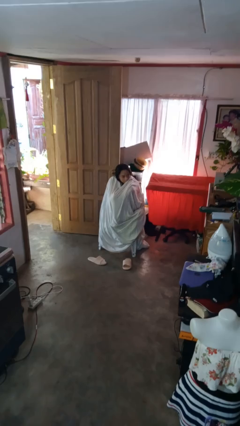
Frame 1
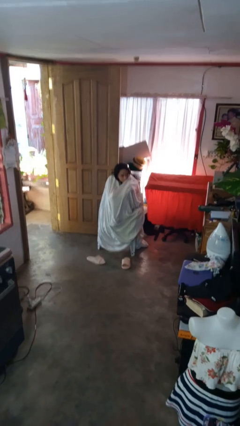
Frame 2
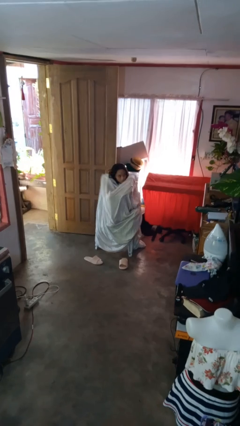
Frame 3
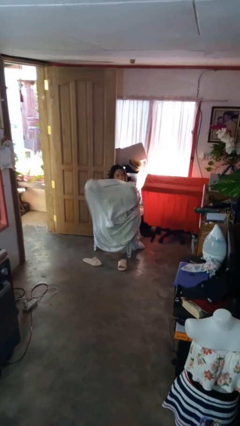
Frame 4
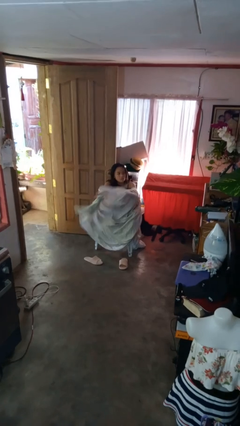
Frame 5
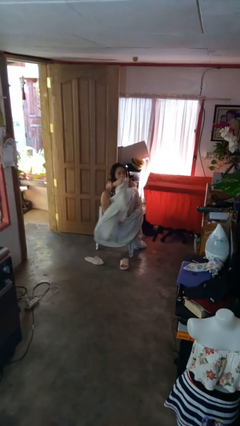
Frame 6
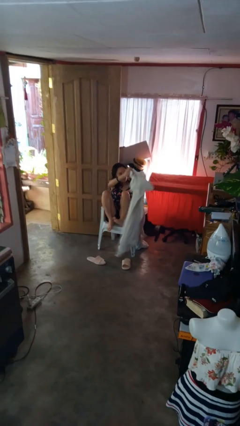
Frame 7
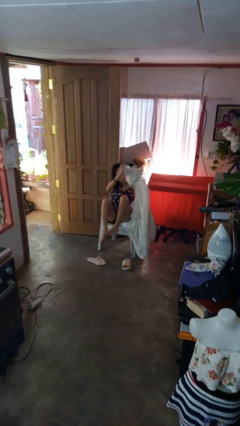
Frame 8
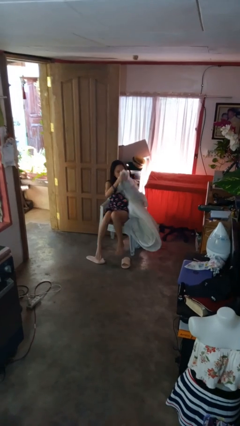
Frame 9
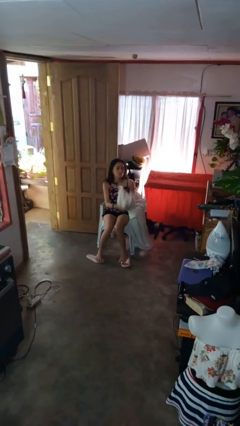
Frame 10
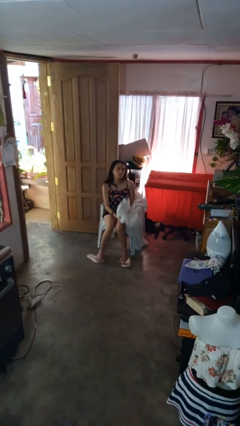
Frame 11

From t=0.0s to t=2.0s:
person uncovers with blanket

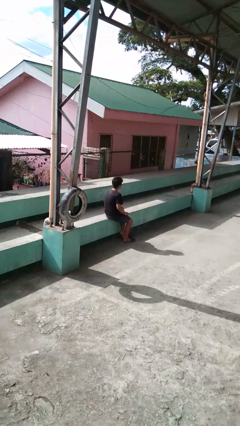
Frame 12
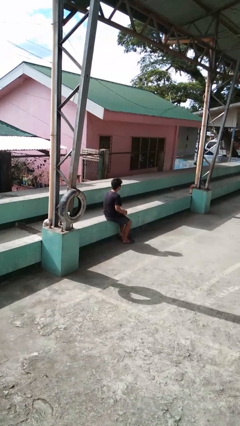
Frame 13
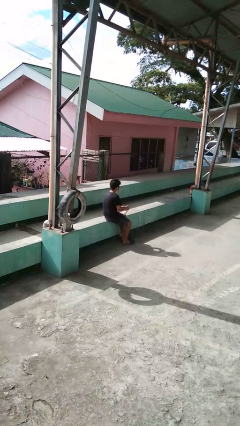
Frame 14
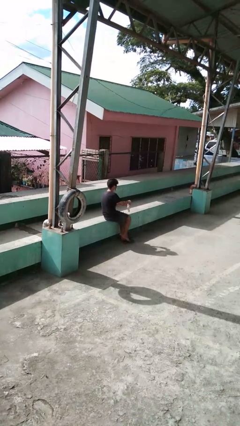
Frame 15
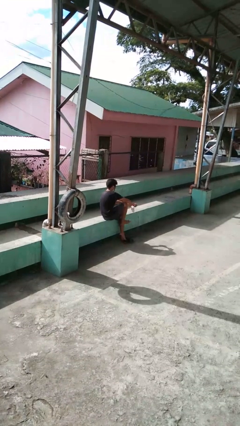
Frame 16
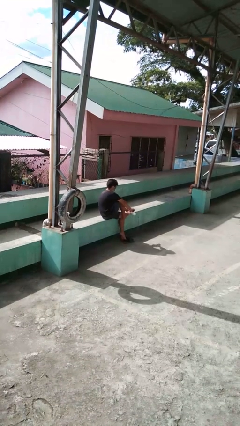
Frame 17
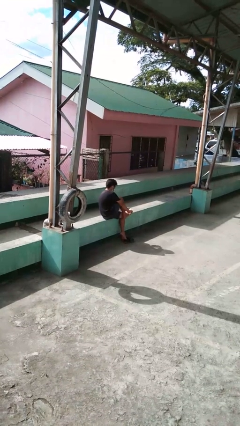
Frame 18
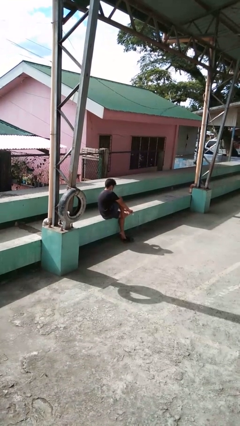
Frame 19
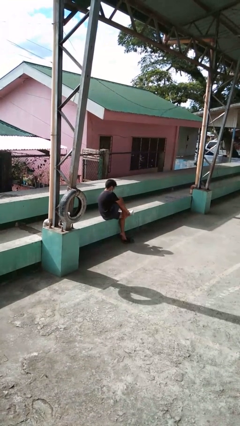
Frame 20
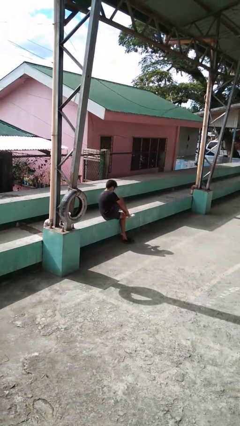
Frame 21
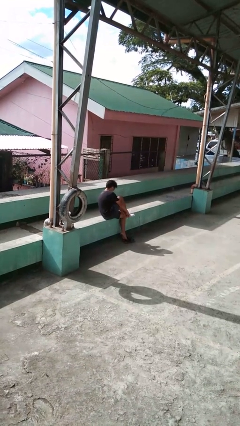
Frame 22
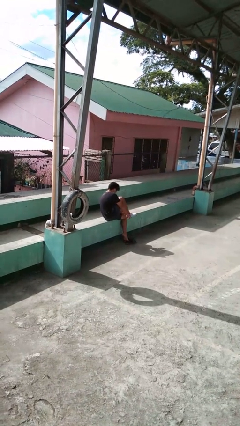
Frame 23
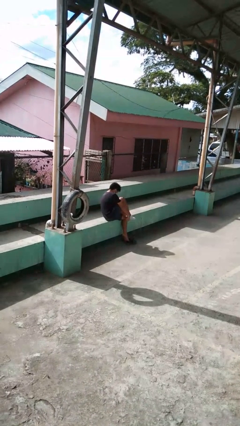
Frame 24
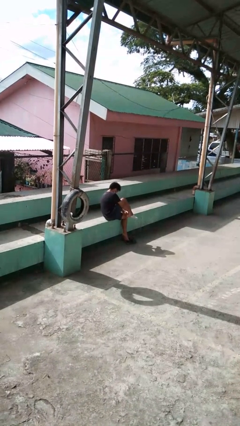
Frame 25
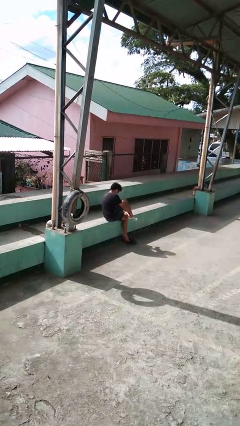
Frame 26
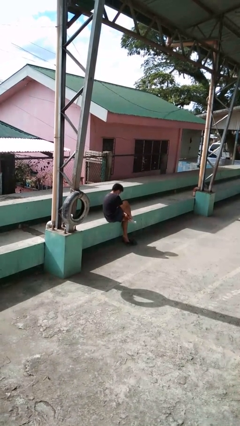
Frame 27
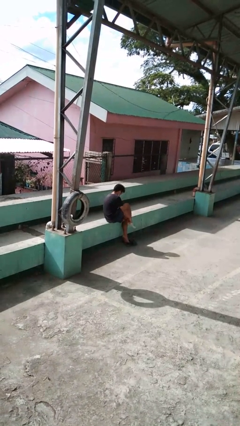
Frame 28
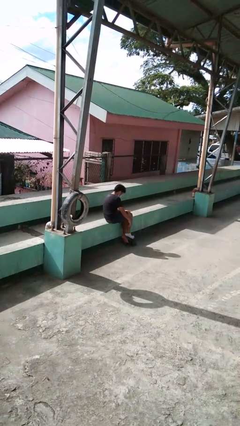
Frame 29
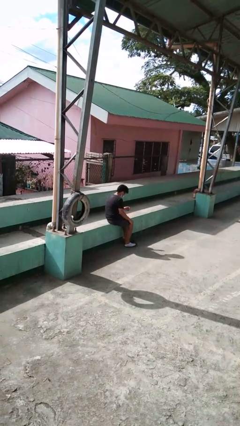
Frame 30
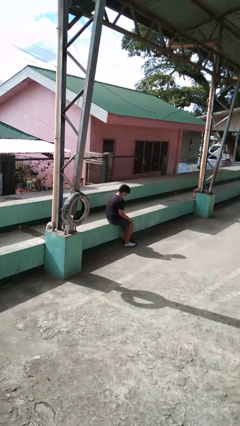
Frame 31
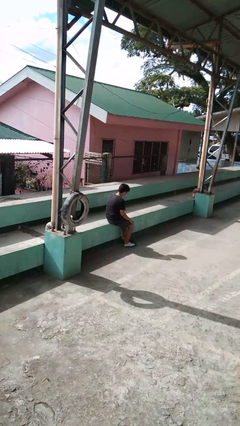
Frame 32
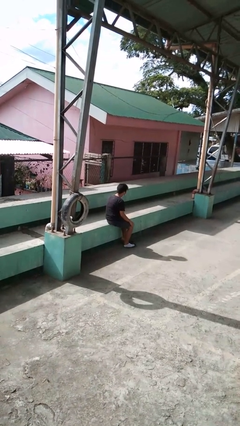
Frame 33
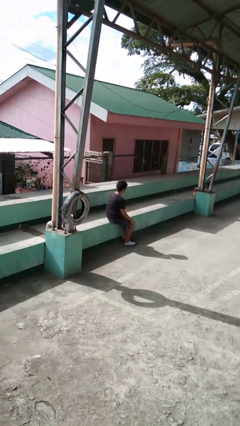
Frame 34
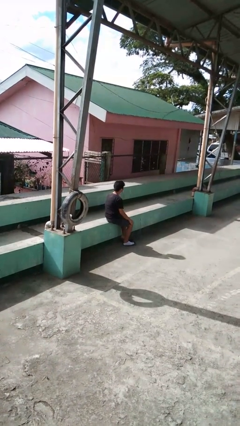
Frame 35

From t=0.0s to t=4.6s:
person puts on socks

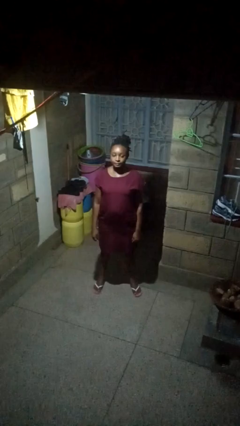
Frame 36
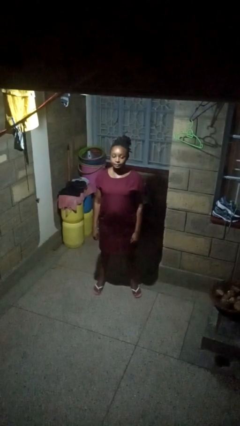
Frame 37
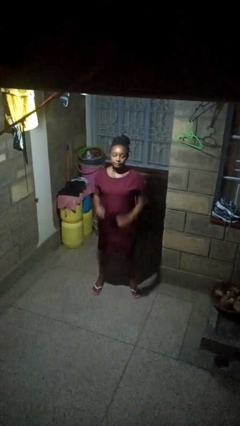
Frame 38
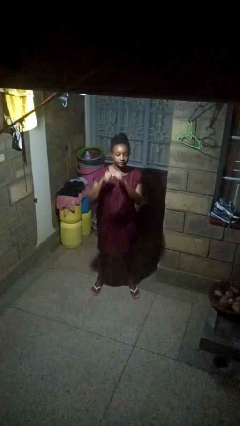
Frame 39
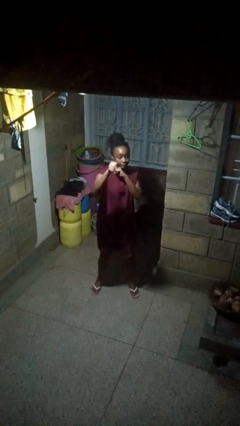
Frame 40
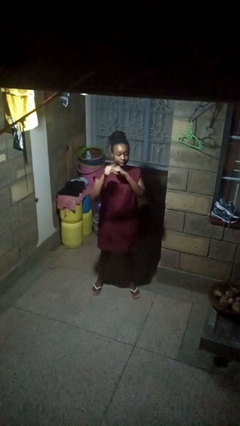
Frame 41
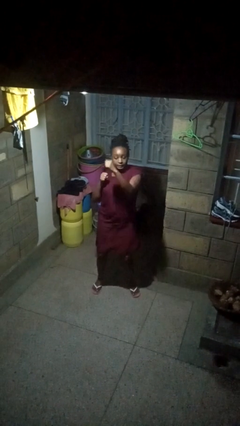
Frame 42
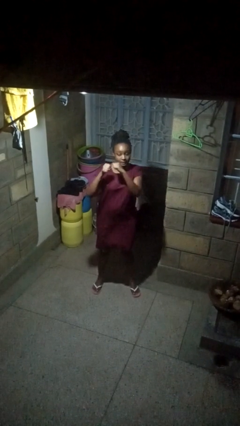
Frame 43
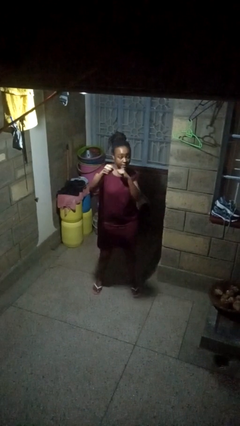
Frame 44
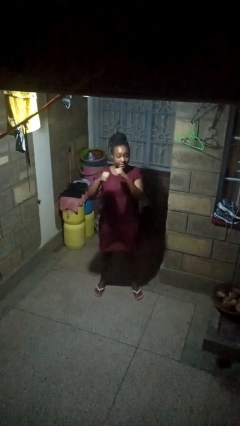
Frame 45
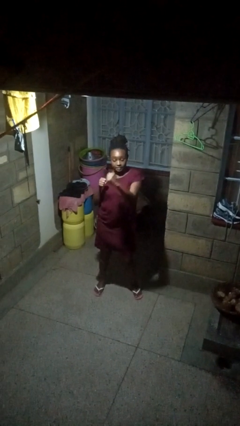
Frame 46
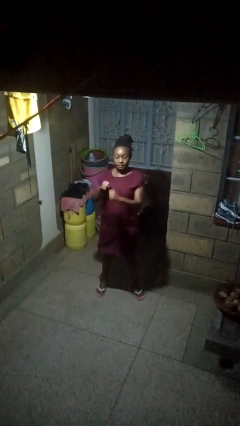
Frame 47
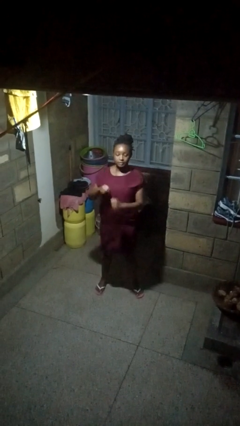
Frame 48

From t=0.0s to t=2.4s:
person punches

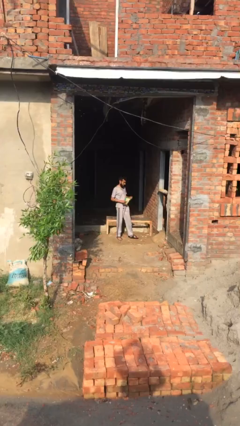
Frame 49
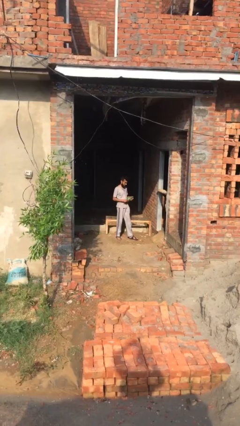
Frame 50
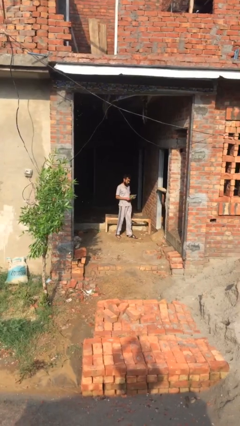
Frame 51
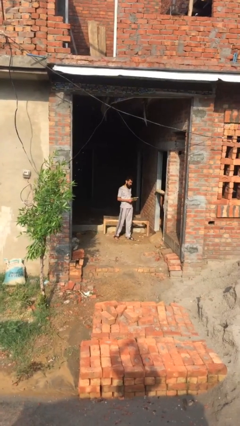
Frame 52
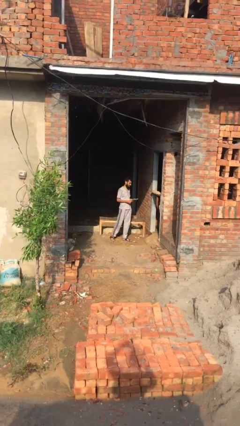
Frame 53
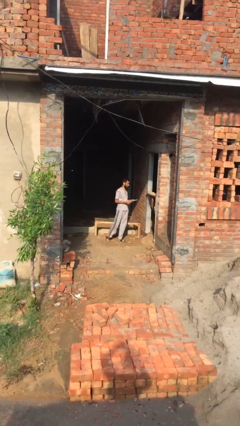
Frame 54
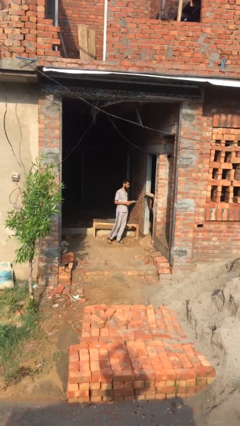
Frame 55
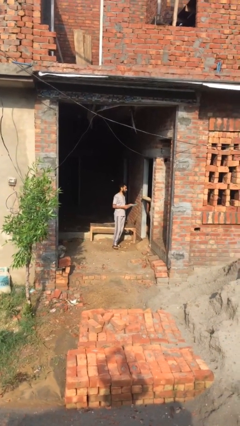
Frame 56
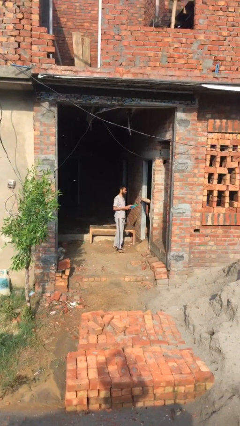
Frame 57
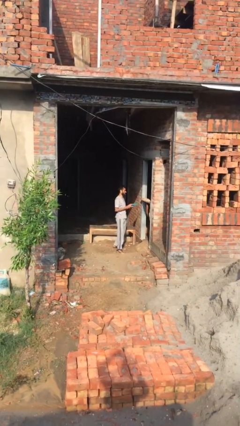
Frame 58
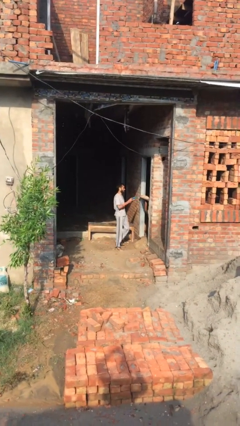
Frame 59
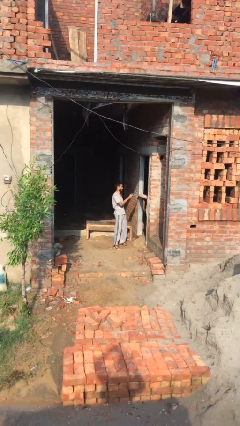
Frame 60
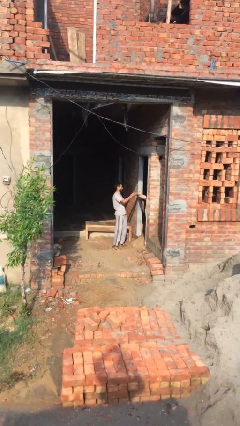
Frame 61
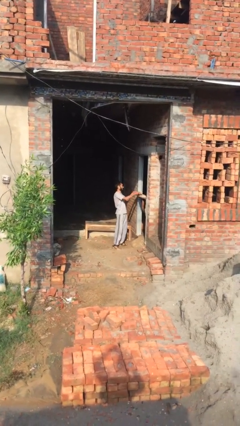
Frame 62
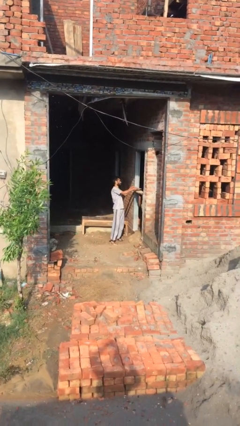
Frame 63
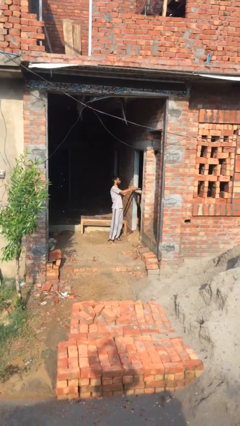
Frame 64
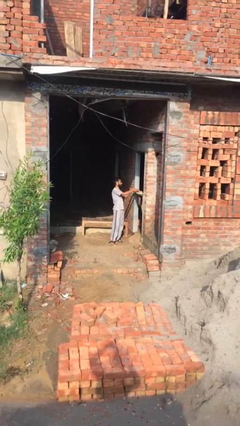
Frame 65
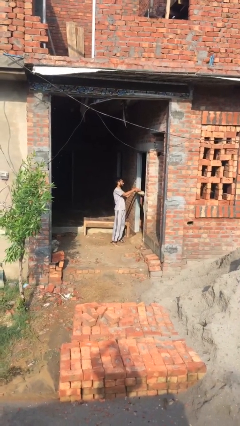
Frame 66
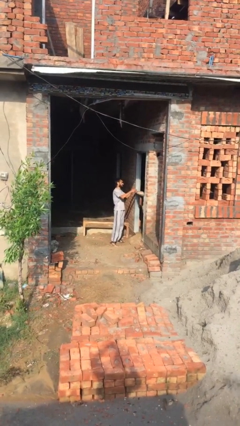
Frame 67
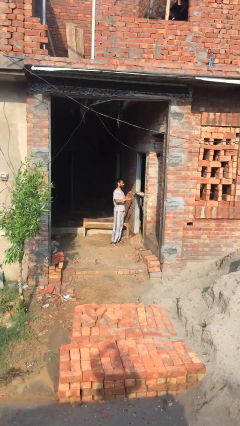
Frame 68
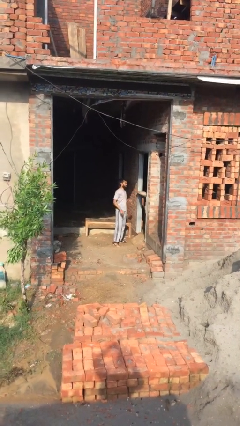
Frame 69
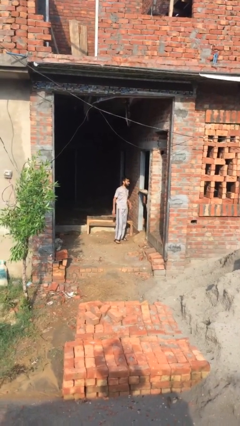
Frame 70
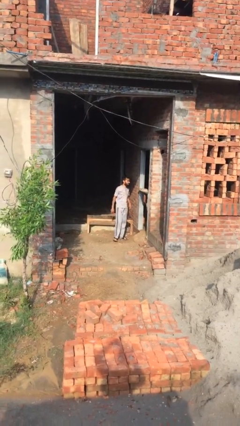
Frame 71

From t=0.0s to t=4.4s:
person puts down object on shelf

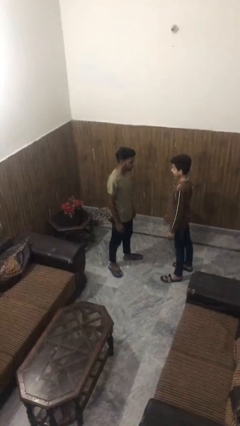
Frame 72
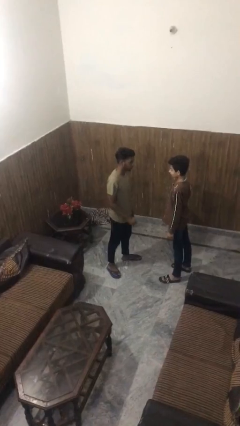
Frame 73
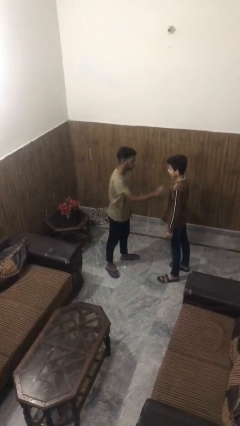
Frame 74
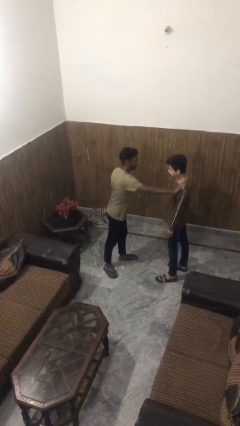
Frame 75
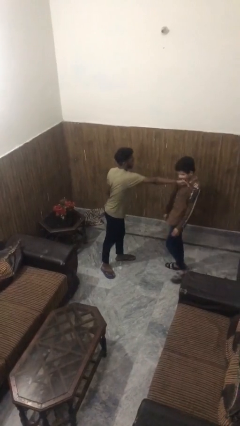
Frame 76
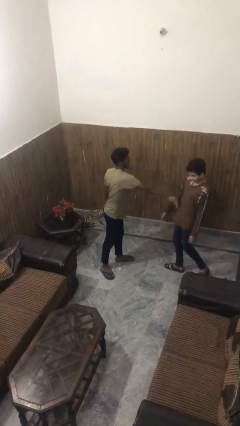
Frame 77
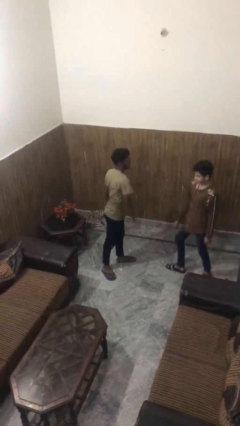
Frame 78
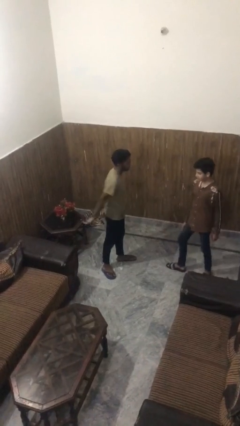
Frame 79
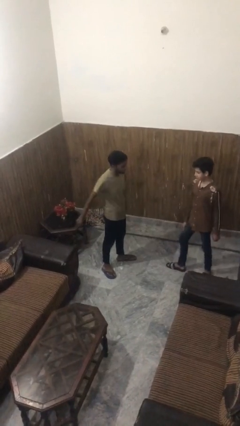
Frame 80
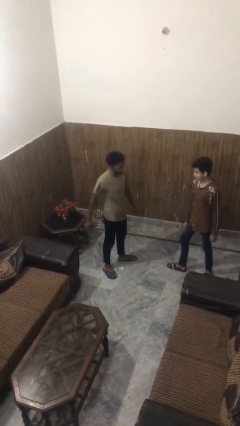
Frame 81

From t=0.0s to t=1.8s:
person shoves person

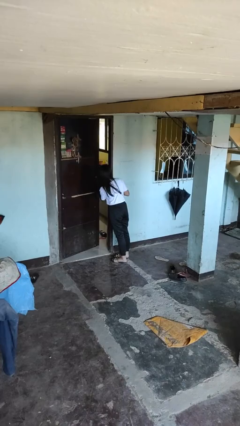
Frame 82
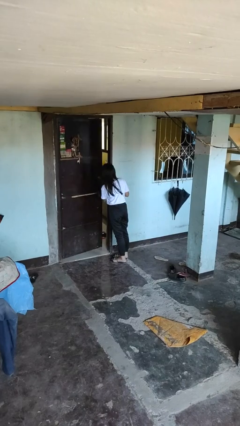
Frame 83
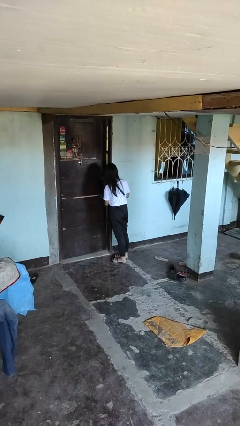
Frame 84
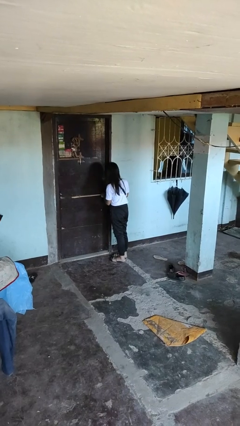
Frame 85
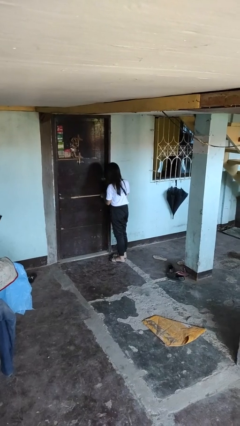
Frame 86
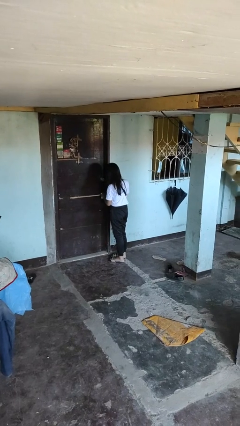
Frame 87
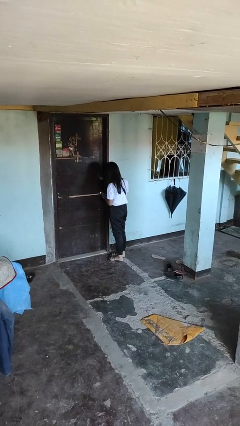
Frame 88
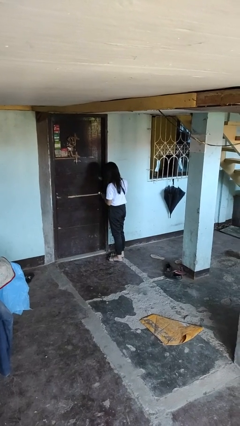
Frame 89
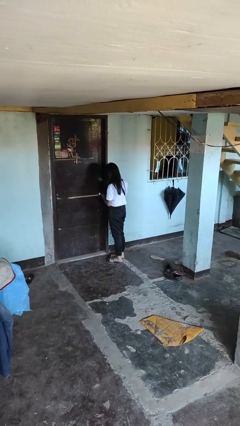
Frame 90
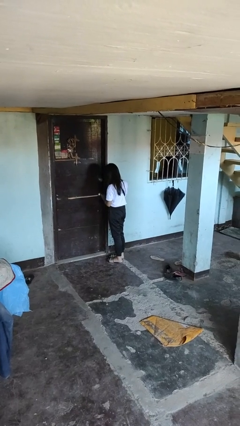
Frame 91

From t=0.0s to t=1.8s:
person closes facility door
